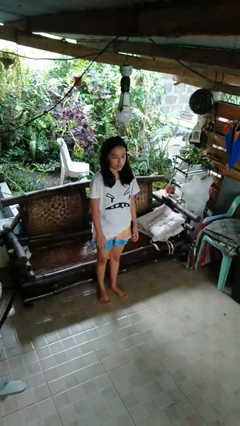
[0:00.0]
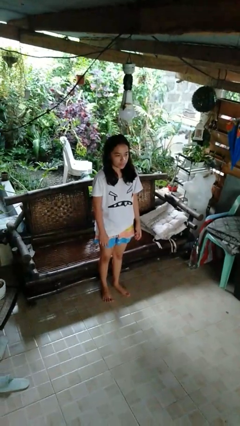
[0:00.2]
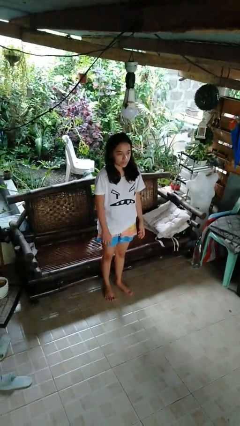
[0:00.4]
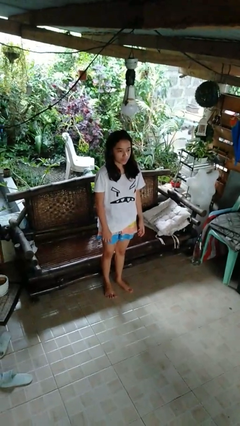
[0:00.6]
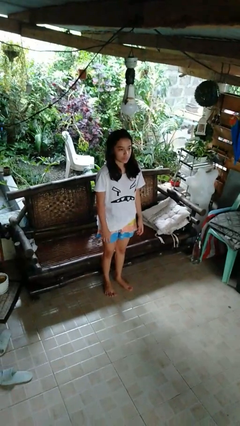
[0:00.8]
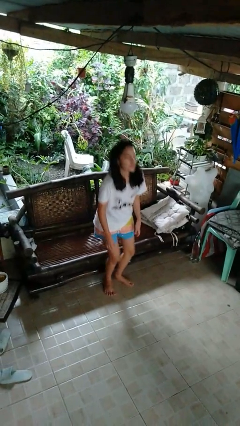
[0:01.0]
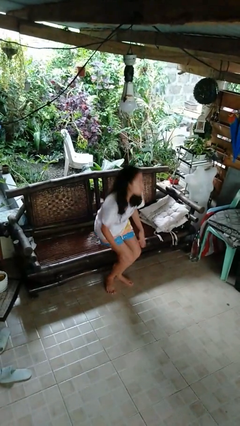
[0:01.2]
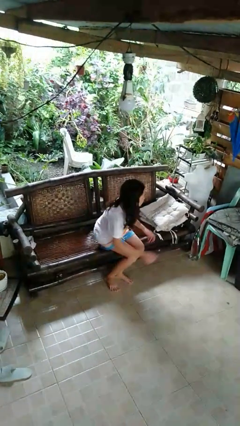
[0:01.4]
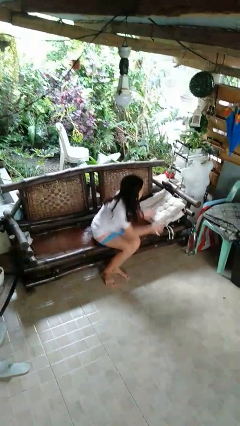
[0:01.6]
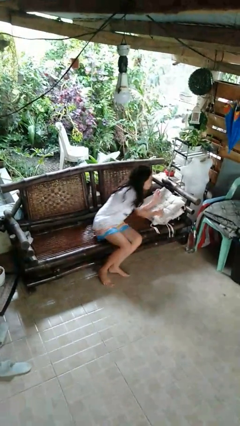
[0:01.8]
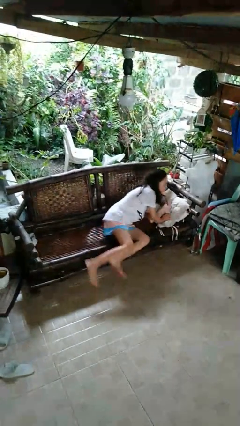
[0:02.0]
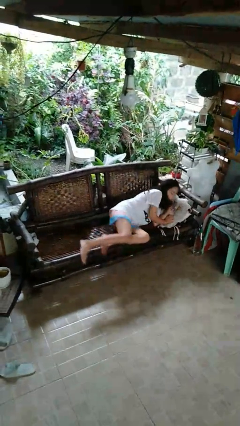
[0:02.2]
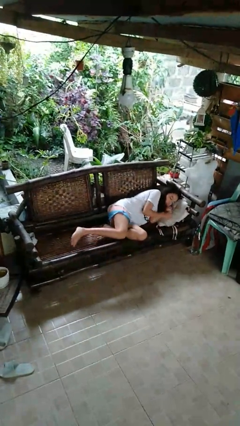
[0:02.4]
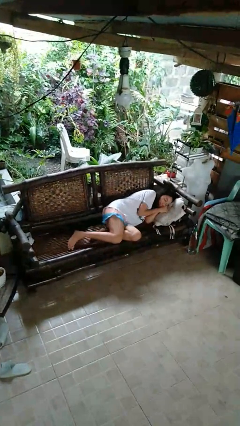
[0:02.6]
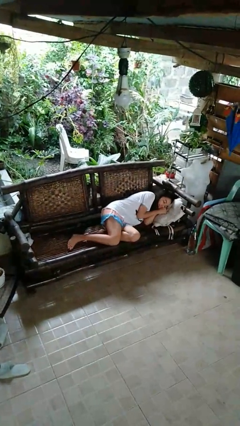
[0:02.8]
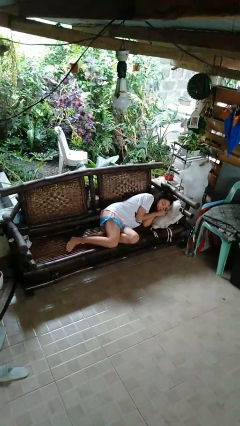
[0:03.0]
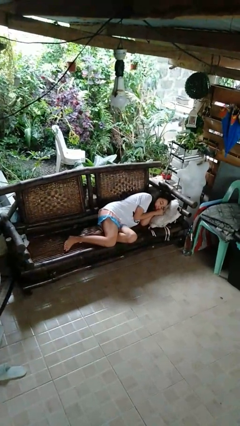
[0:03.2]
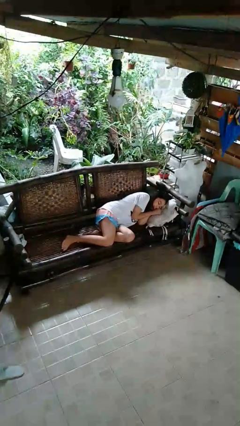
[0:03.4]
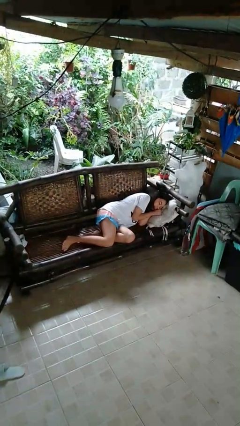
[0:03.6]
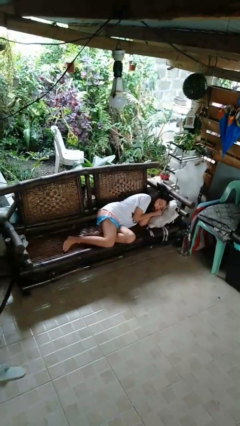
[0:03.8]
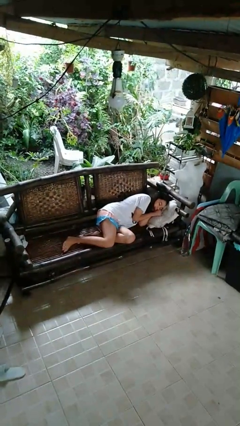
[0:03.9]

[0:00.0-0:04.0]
person lies down on couch

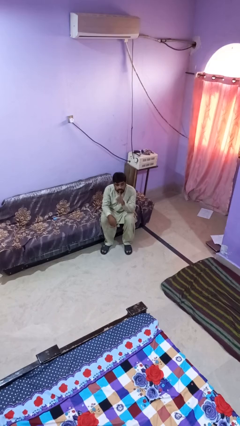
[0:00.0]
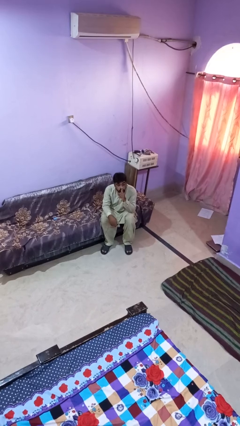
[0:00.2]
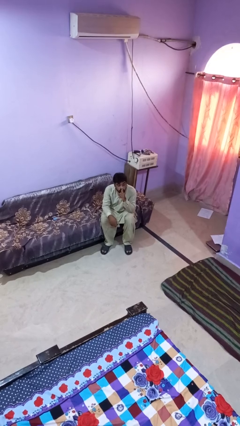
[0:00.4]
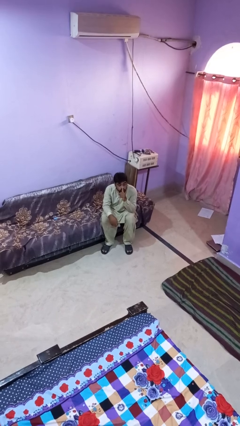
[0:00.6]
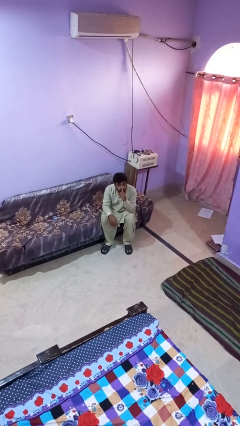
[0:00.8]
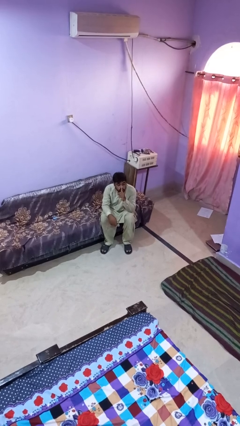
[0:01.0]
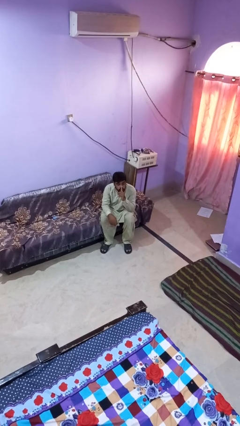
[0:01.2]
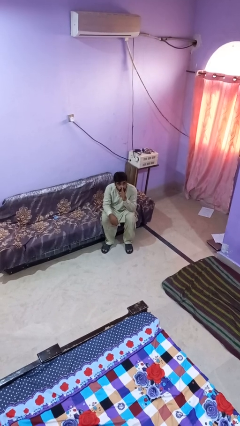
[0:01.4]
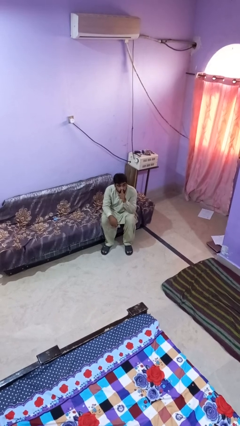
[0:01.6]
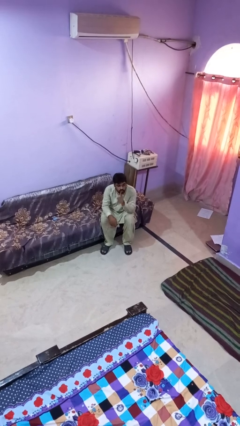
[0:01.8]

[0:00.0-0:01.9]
person gestures be quiet

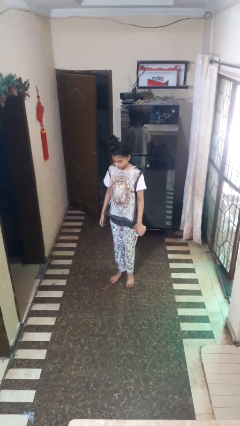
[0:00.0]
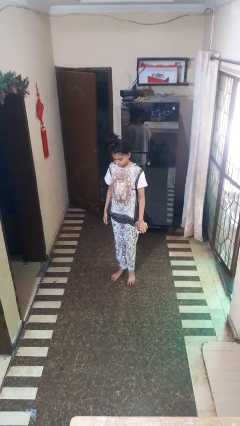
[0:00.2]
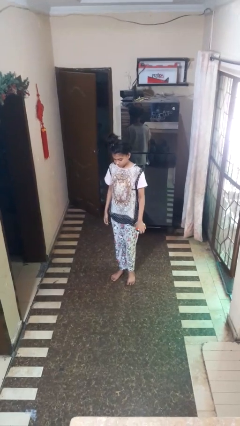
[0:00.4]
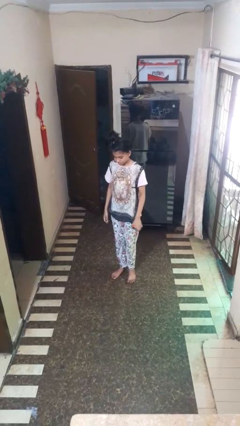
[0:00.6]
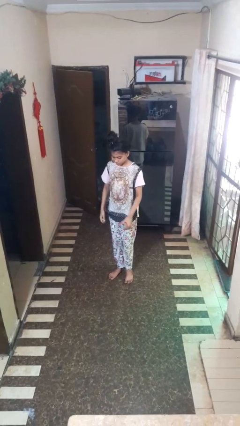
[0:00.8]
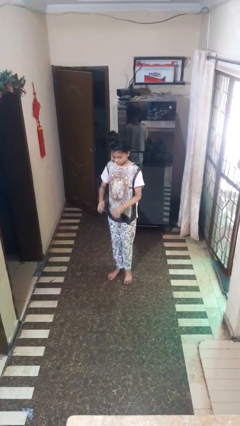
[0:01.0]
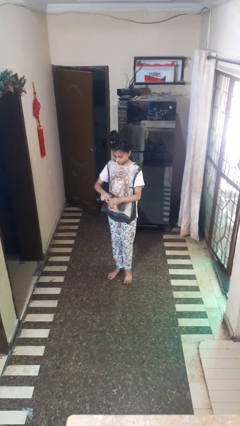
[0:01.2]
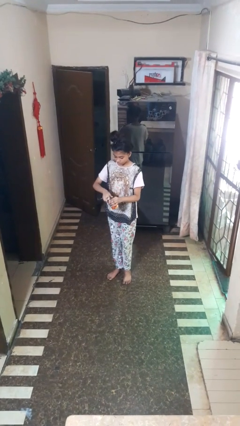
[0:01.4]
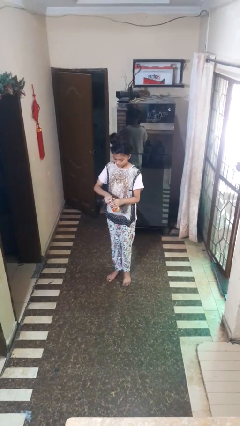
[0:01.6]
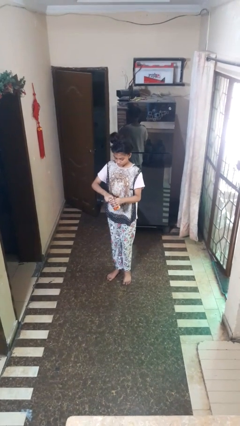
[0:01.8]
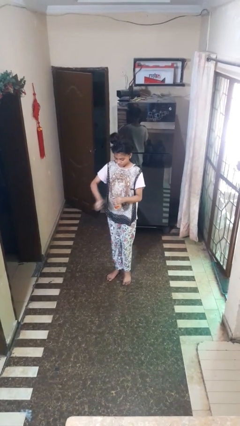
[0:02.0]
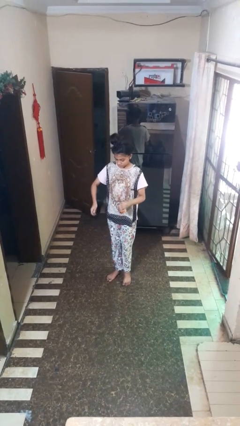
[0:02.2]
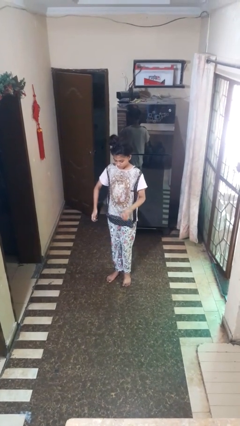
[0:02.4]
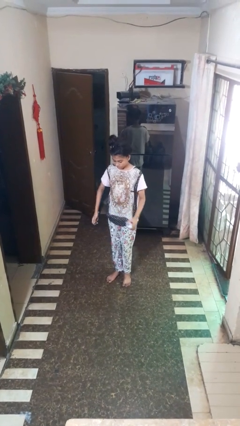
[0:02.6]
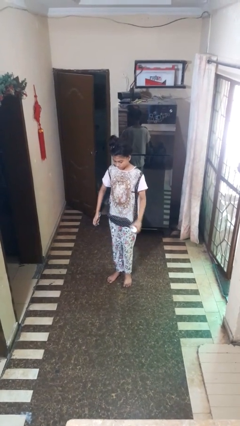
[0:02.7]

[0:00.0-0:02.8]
person opens can with can opener

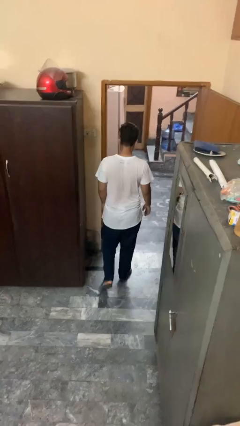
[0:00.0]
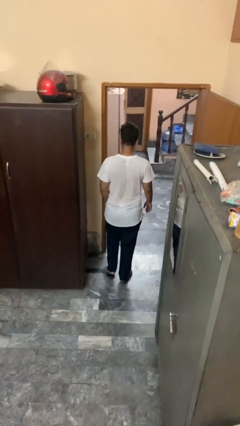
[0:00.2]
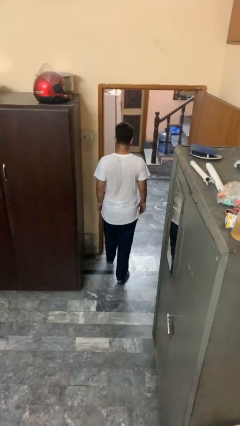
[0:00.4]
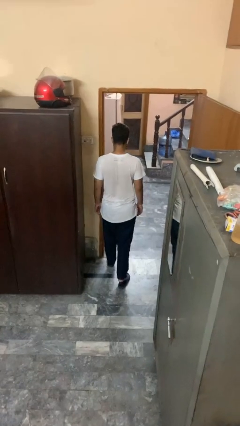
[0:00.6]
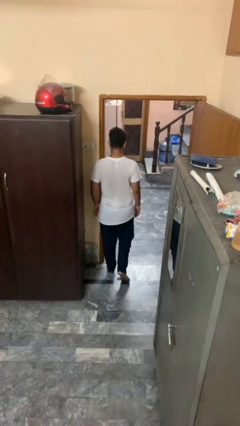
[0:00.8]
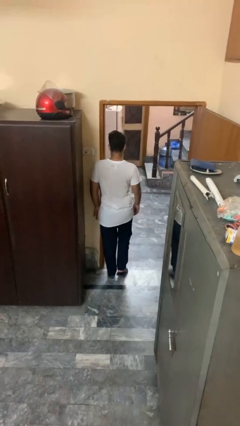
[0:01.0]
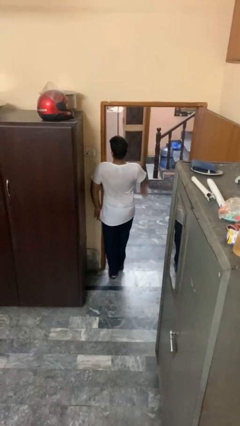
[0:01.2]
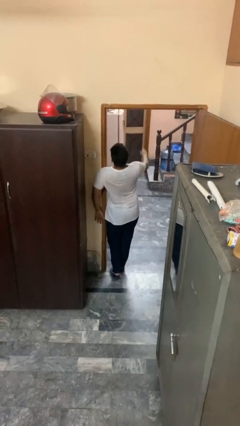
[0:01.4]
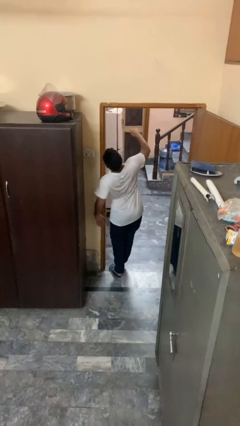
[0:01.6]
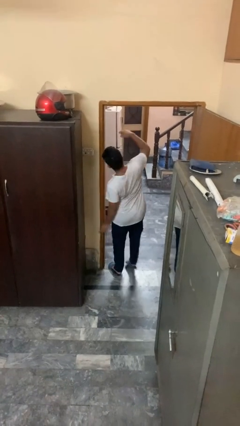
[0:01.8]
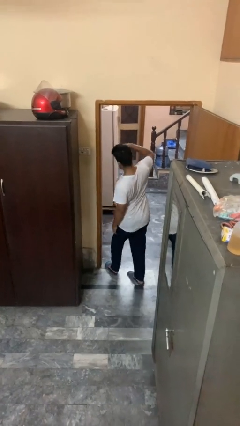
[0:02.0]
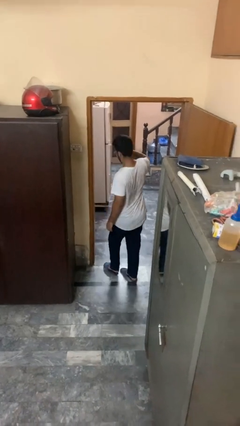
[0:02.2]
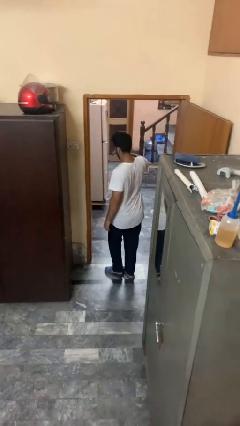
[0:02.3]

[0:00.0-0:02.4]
person bumps into wall

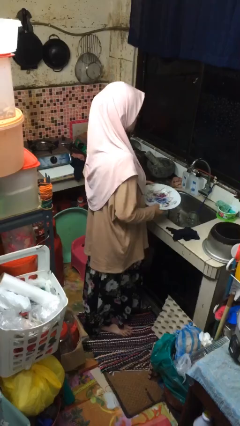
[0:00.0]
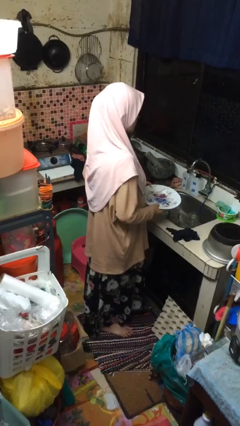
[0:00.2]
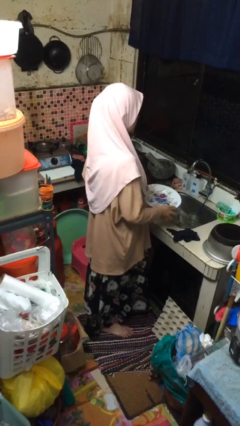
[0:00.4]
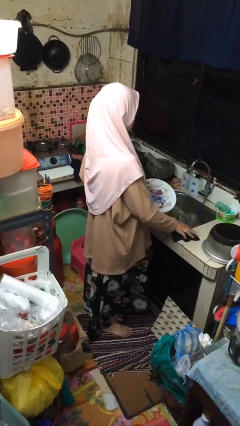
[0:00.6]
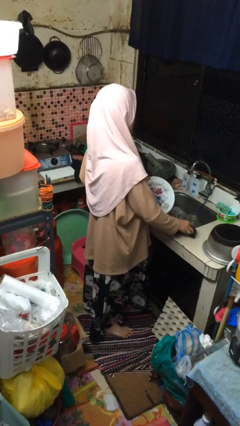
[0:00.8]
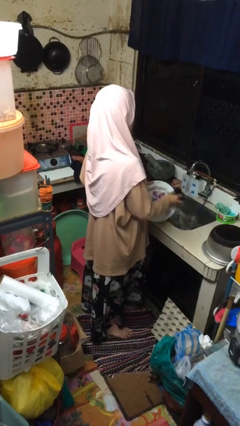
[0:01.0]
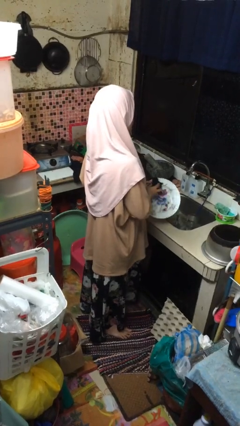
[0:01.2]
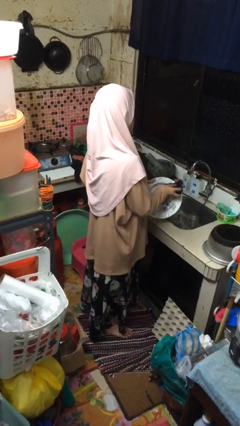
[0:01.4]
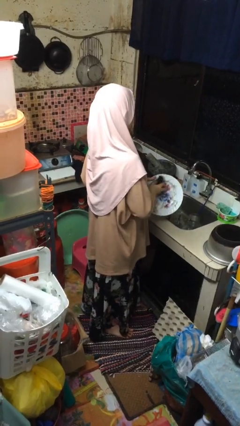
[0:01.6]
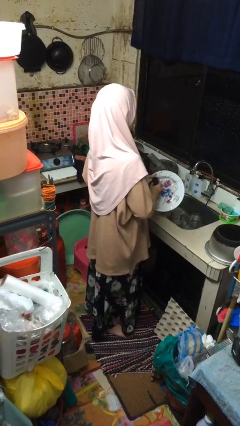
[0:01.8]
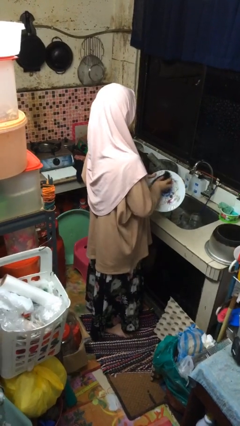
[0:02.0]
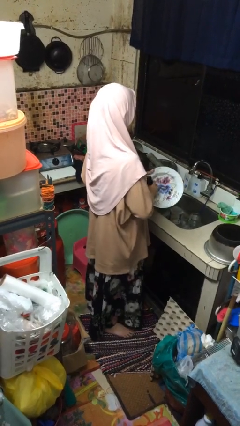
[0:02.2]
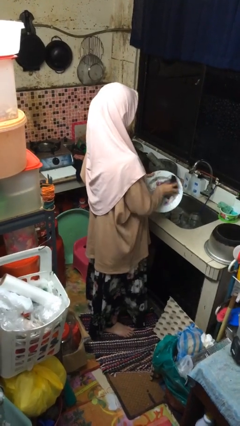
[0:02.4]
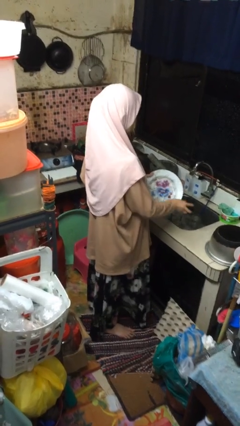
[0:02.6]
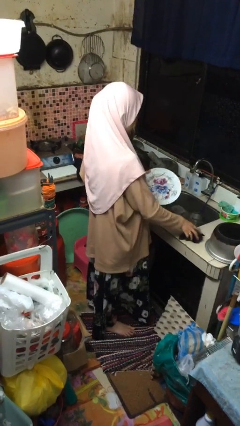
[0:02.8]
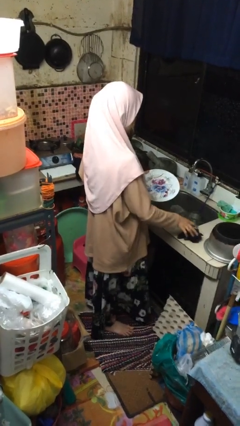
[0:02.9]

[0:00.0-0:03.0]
person dries dish

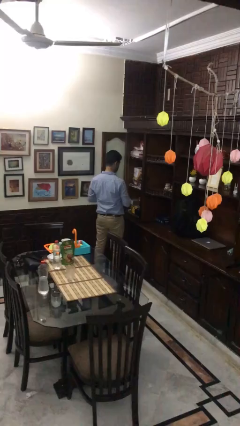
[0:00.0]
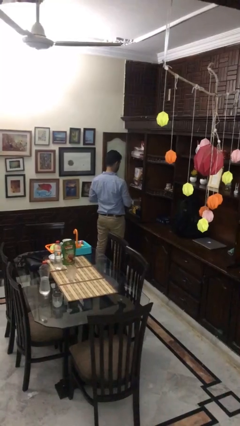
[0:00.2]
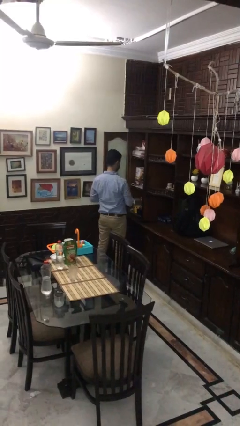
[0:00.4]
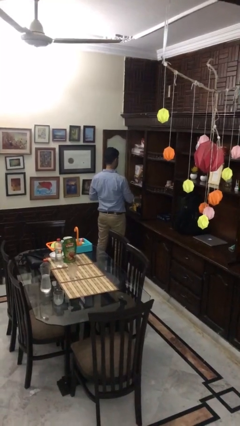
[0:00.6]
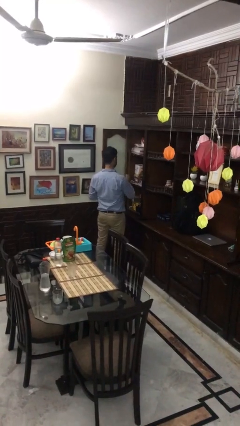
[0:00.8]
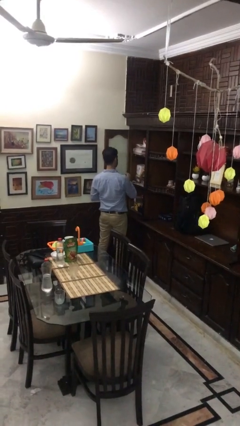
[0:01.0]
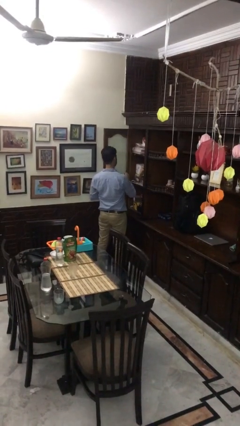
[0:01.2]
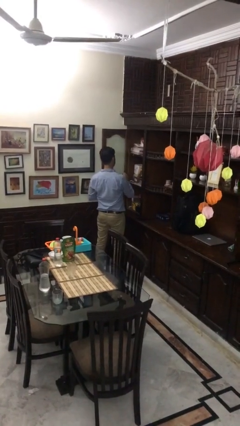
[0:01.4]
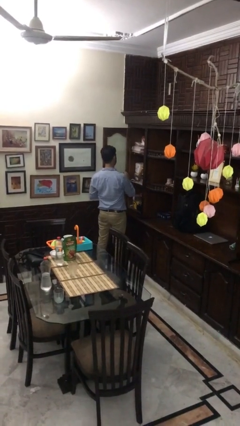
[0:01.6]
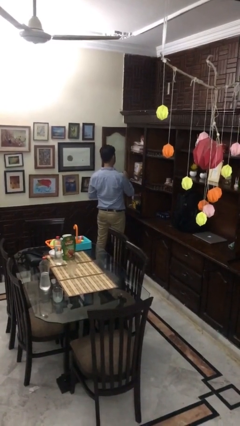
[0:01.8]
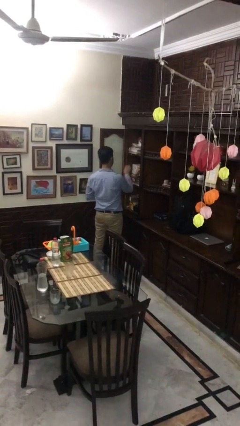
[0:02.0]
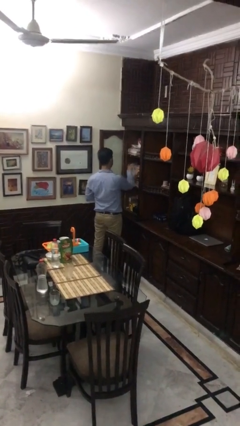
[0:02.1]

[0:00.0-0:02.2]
person puts down object into cabinet

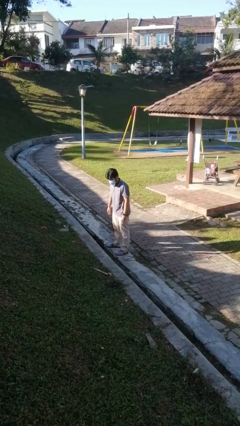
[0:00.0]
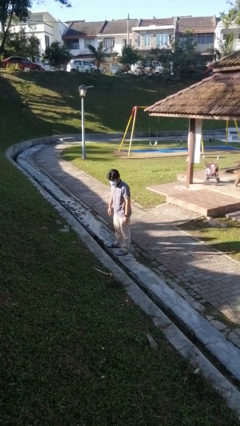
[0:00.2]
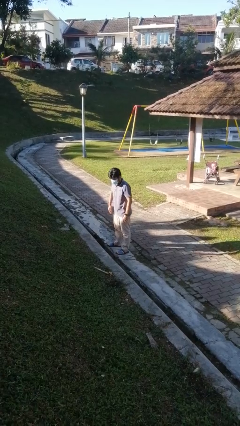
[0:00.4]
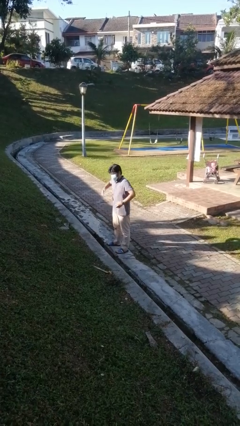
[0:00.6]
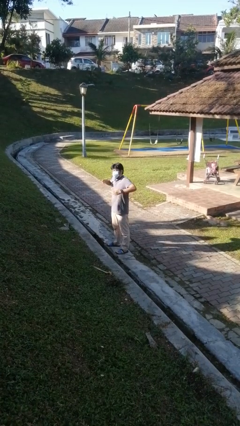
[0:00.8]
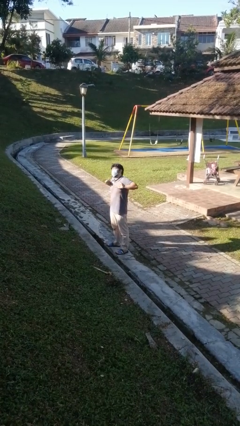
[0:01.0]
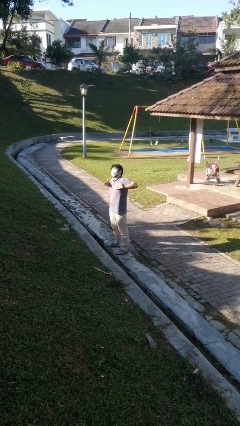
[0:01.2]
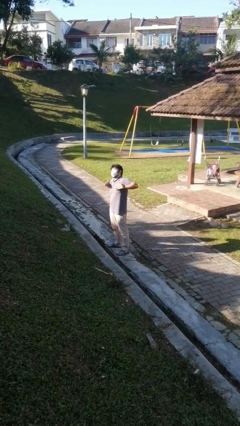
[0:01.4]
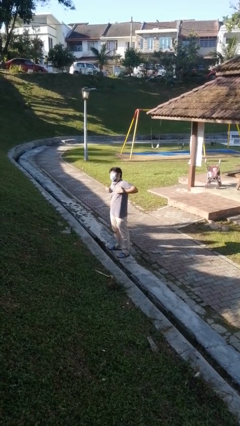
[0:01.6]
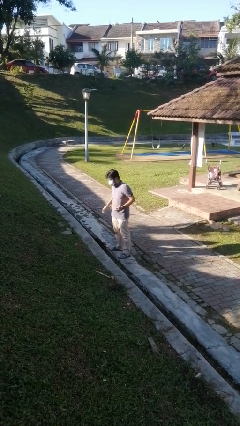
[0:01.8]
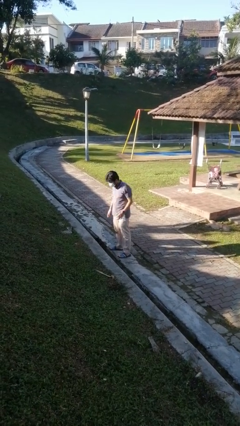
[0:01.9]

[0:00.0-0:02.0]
person drums on chest
